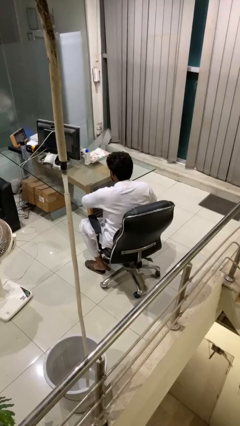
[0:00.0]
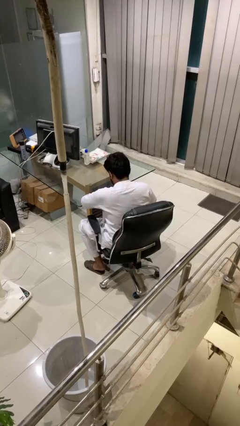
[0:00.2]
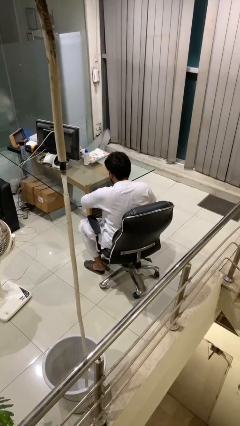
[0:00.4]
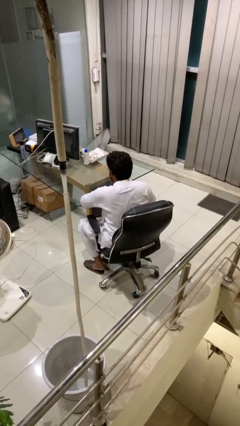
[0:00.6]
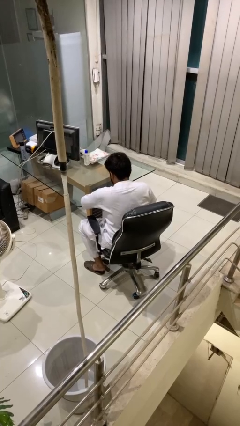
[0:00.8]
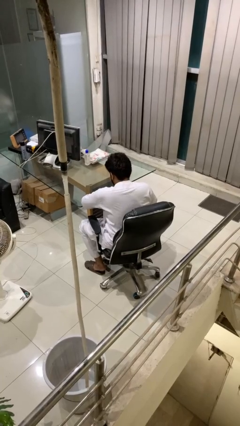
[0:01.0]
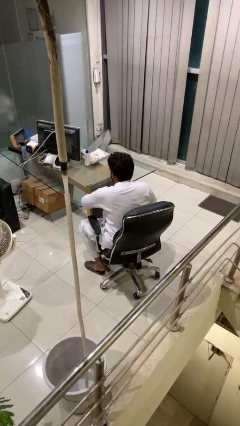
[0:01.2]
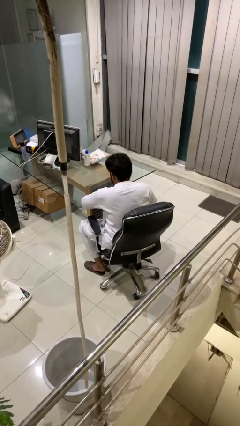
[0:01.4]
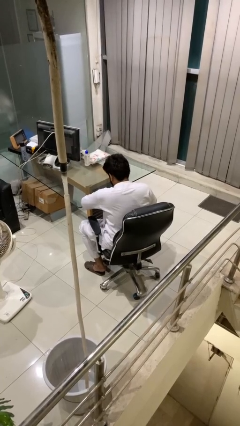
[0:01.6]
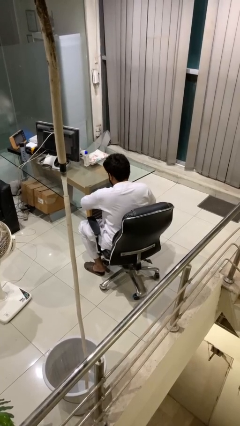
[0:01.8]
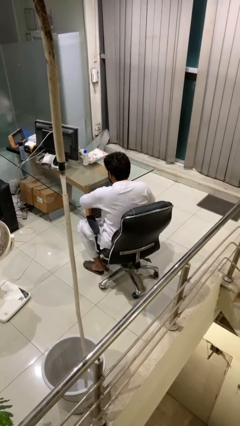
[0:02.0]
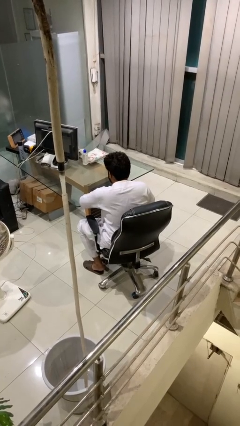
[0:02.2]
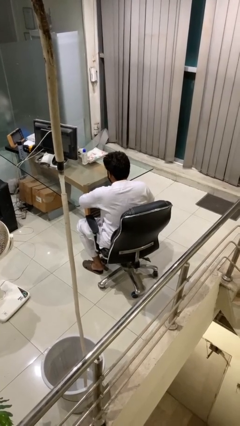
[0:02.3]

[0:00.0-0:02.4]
person nods head

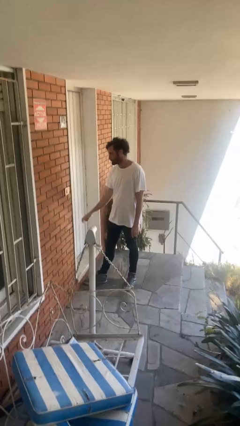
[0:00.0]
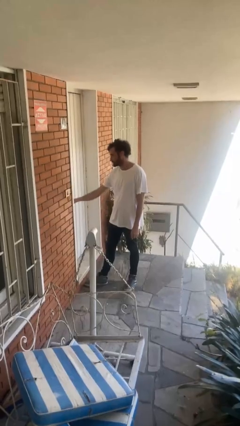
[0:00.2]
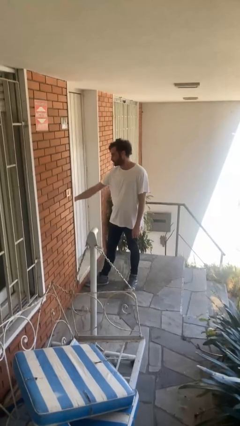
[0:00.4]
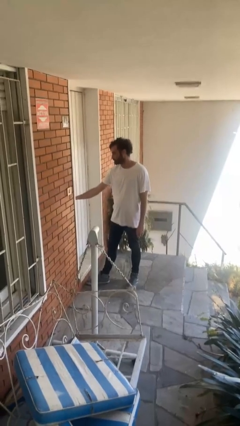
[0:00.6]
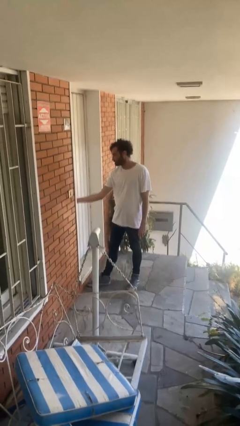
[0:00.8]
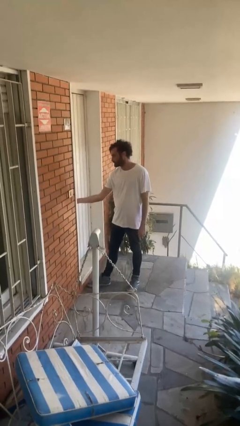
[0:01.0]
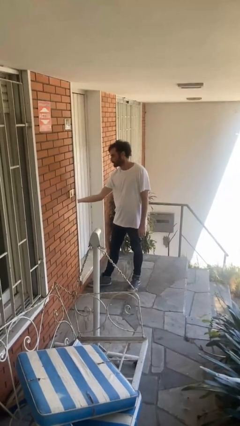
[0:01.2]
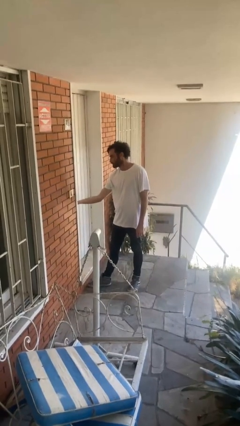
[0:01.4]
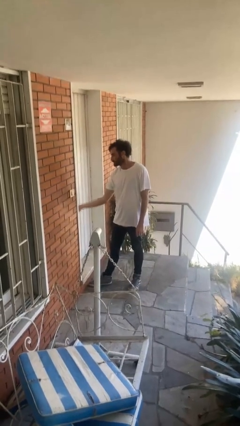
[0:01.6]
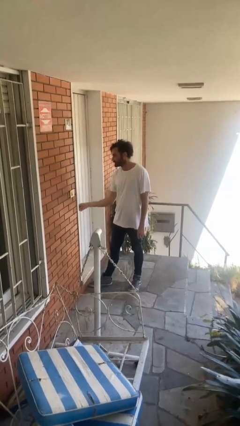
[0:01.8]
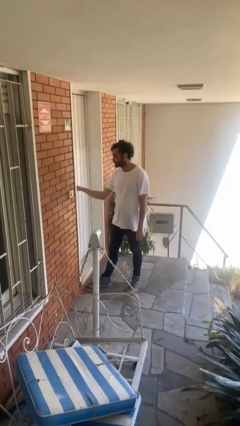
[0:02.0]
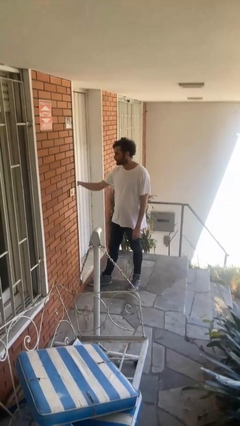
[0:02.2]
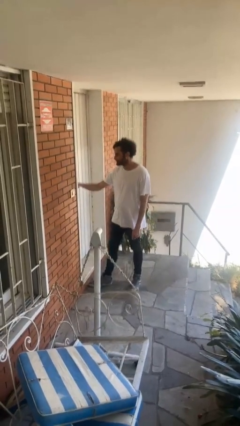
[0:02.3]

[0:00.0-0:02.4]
person unlocks door with keys

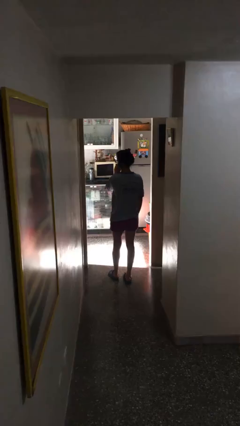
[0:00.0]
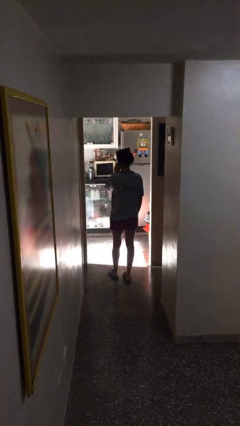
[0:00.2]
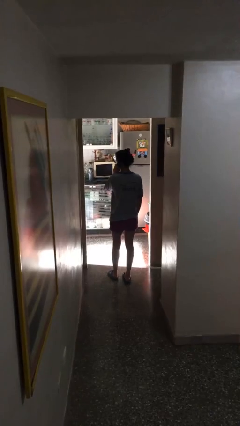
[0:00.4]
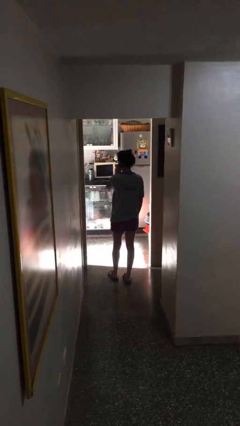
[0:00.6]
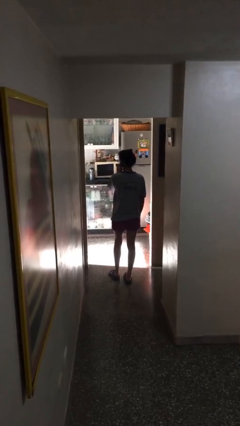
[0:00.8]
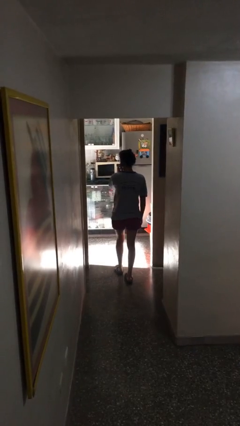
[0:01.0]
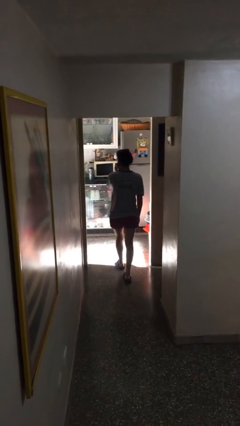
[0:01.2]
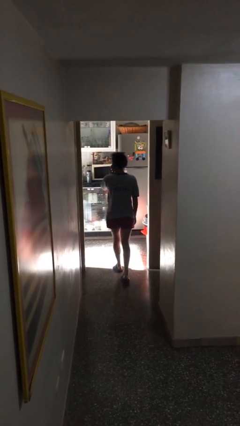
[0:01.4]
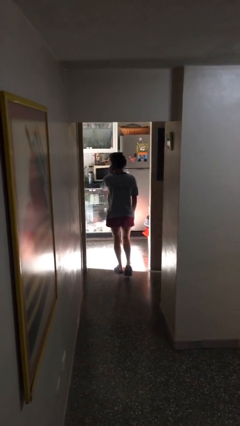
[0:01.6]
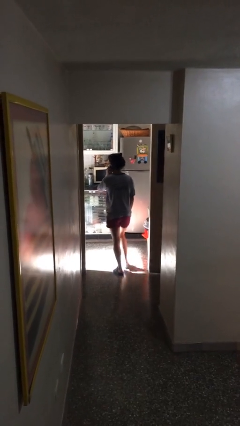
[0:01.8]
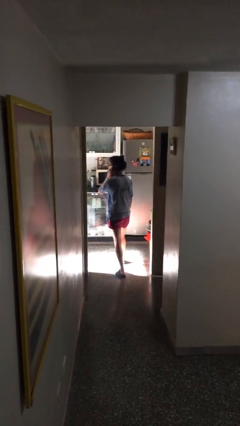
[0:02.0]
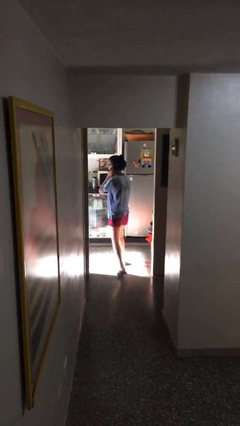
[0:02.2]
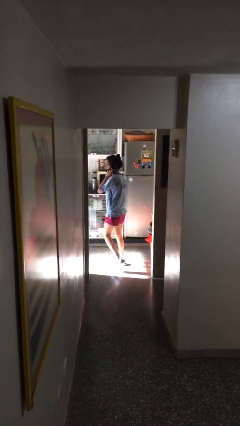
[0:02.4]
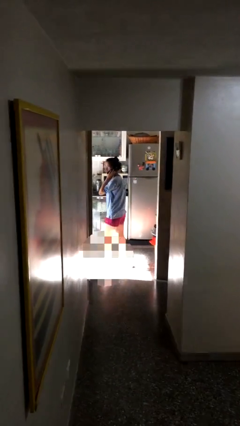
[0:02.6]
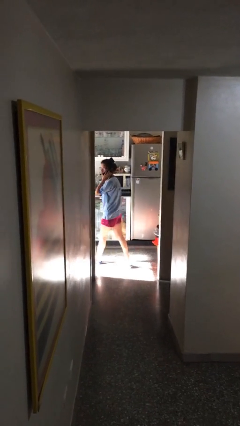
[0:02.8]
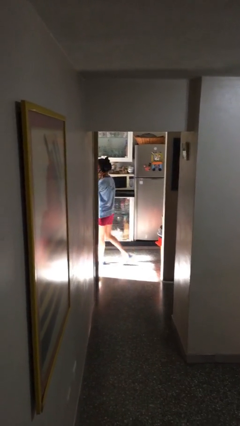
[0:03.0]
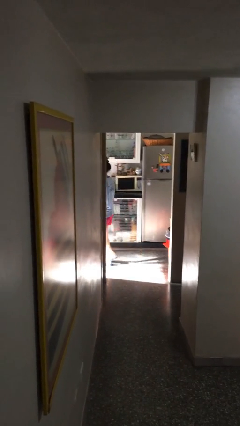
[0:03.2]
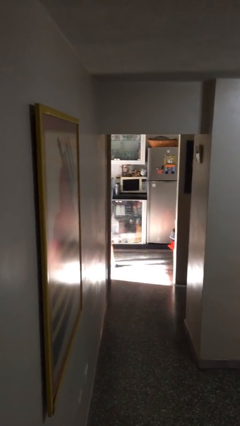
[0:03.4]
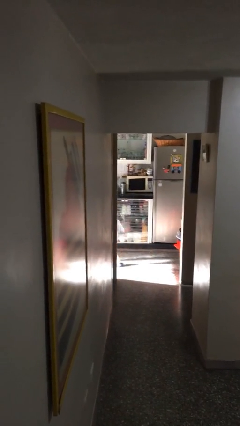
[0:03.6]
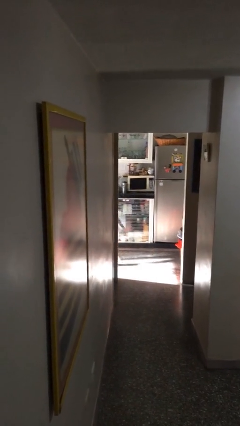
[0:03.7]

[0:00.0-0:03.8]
person exits scene through structure

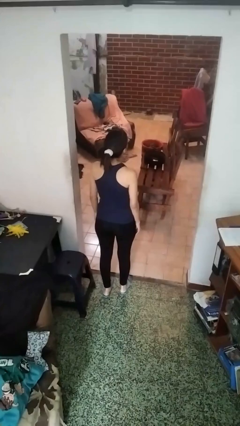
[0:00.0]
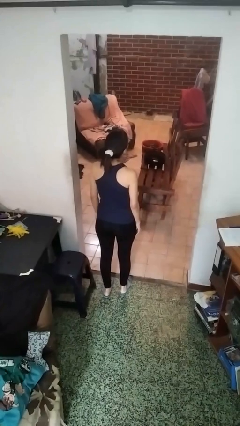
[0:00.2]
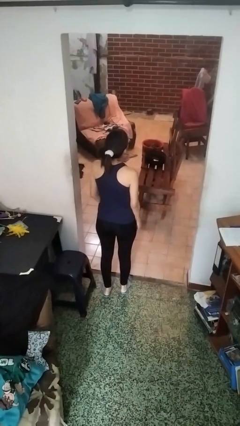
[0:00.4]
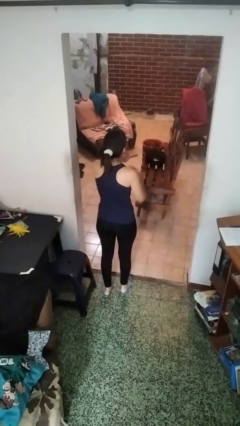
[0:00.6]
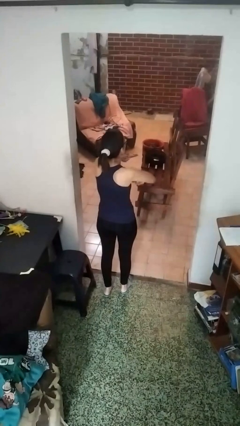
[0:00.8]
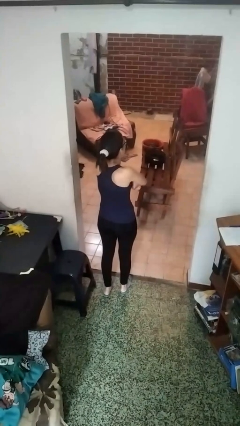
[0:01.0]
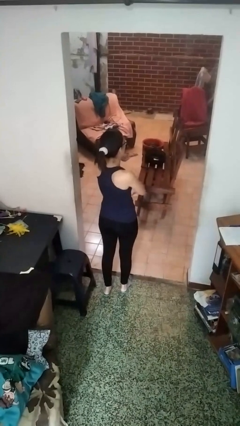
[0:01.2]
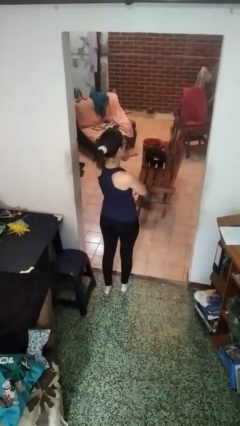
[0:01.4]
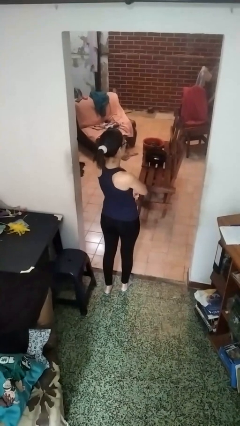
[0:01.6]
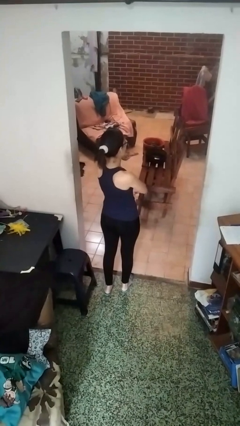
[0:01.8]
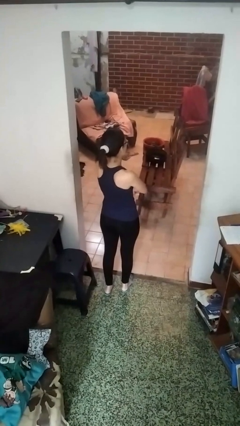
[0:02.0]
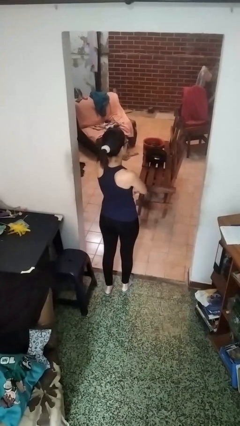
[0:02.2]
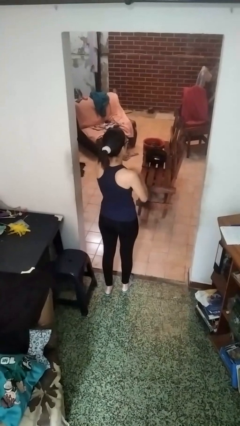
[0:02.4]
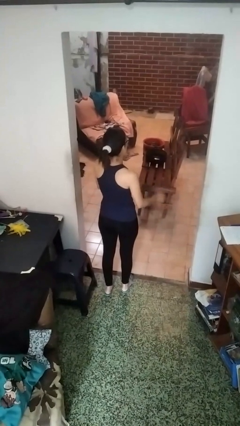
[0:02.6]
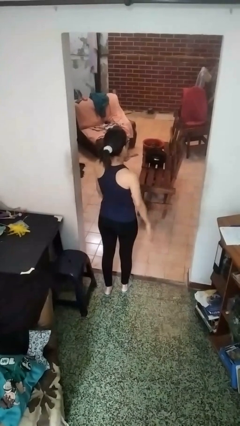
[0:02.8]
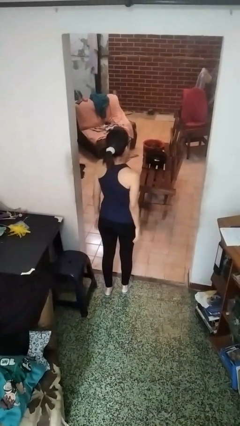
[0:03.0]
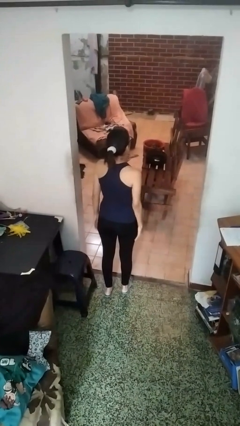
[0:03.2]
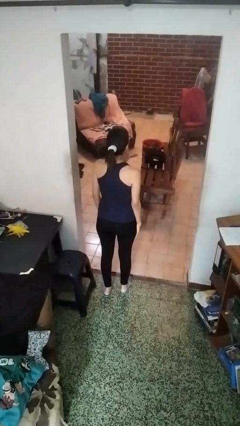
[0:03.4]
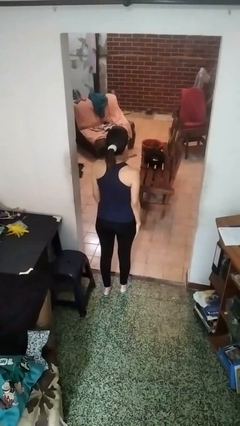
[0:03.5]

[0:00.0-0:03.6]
person gestures arms x

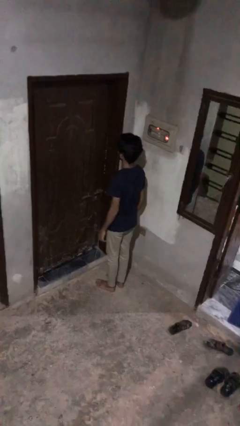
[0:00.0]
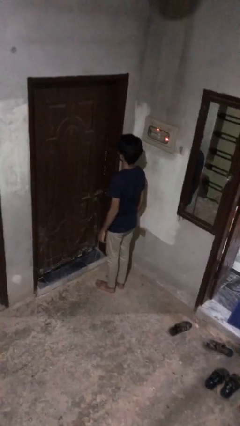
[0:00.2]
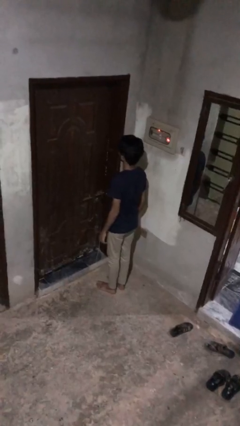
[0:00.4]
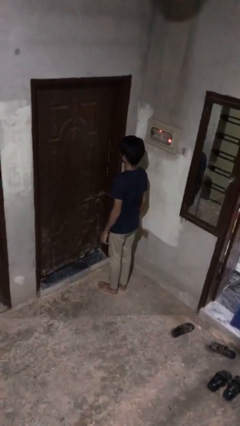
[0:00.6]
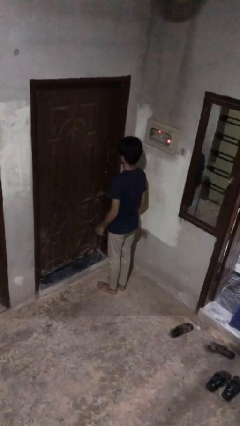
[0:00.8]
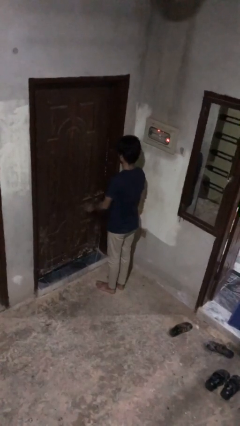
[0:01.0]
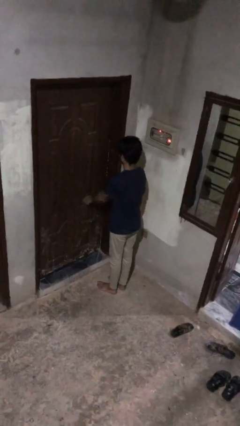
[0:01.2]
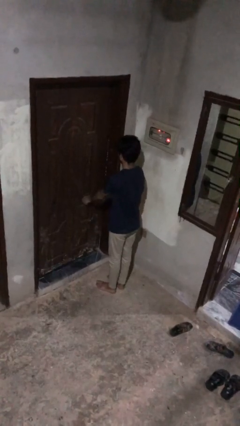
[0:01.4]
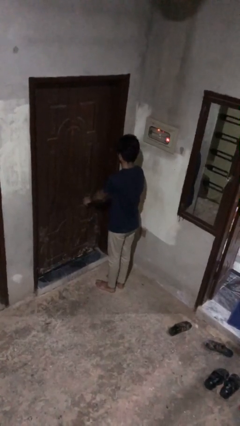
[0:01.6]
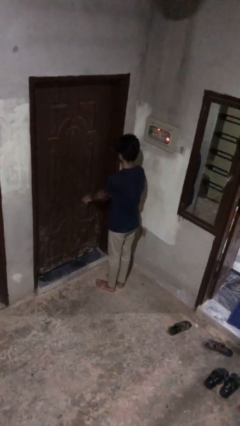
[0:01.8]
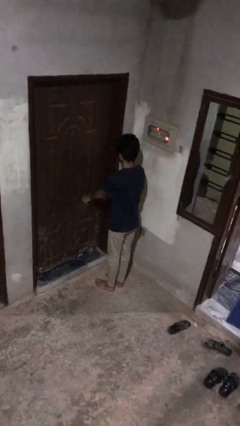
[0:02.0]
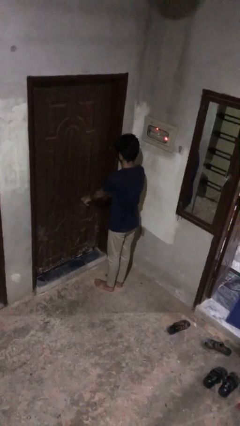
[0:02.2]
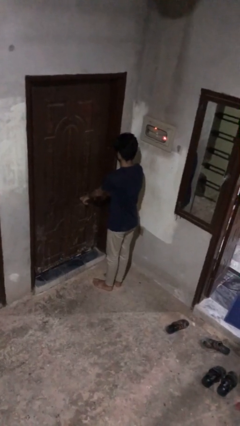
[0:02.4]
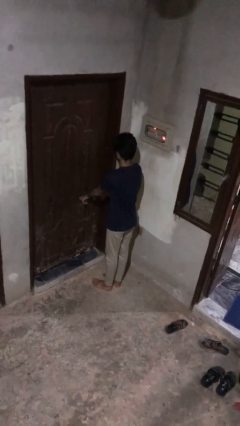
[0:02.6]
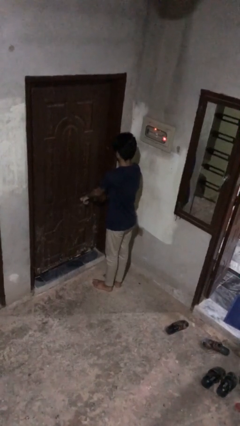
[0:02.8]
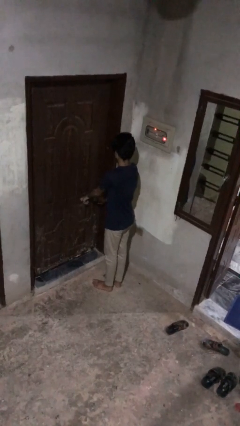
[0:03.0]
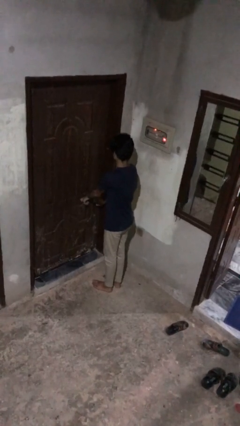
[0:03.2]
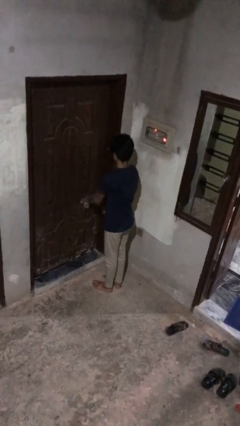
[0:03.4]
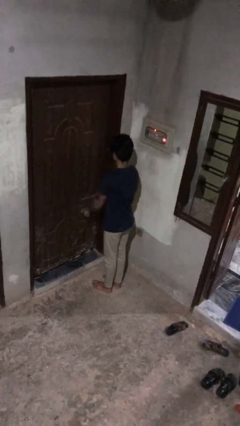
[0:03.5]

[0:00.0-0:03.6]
person locks door with keys

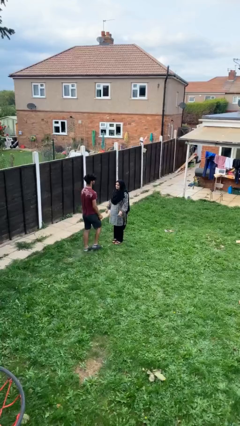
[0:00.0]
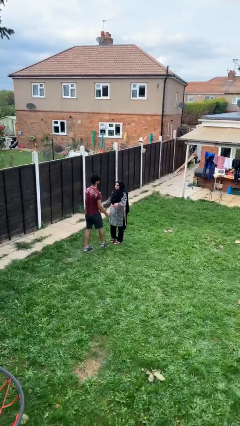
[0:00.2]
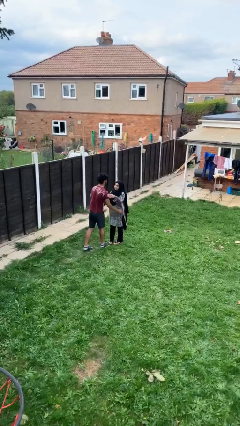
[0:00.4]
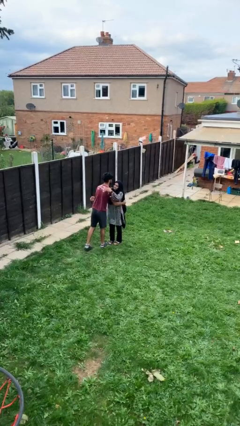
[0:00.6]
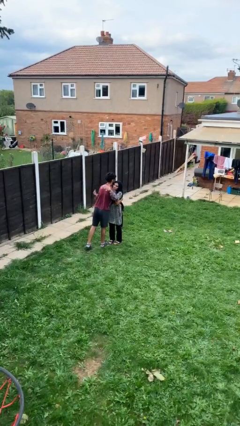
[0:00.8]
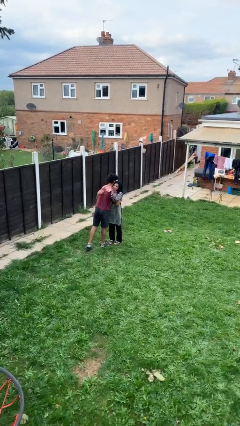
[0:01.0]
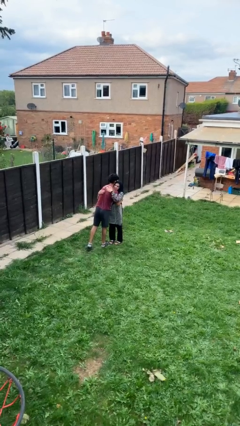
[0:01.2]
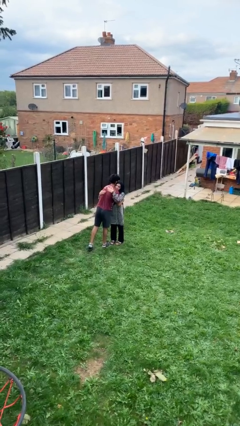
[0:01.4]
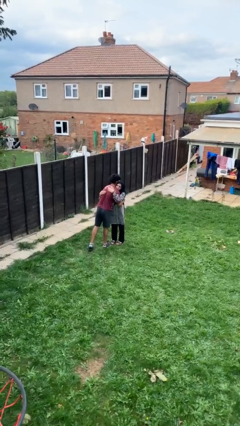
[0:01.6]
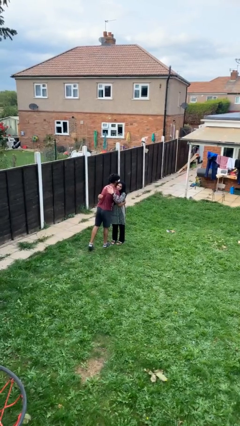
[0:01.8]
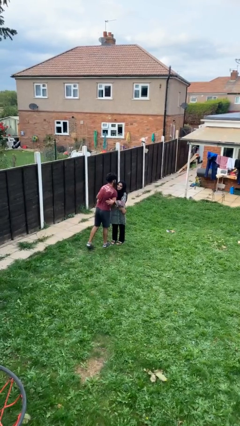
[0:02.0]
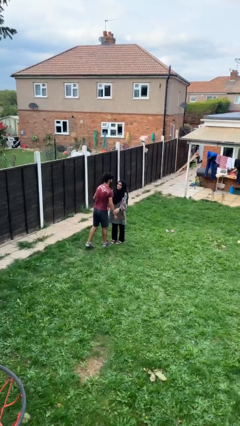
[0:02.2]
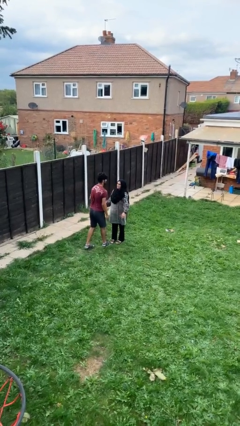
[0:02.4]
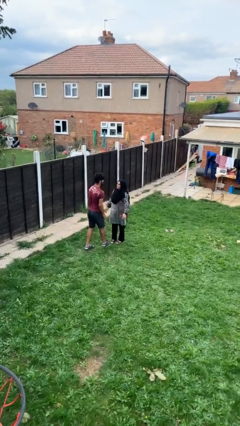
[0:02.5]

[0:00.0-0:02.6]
person embraces person
